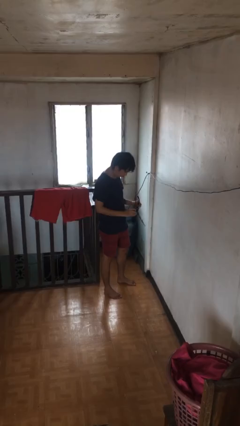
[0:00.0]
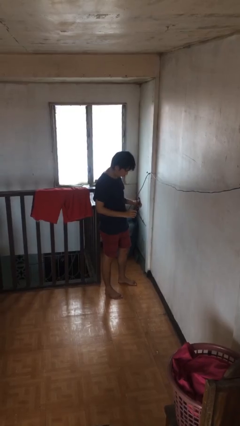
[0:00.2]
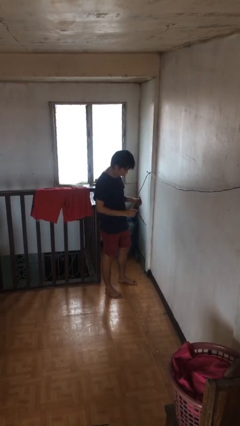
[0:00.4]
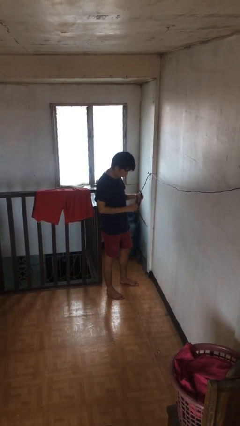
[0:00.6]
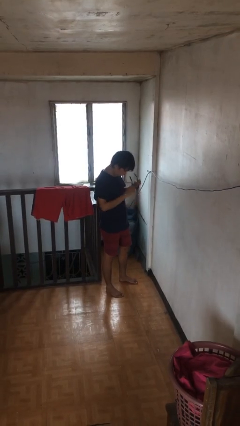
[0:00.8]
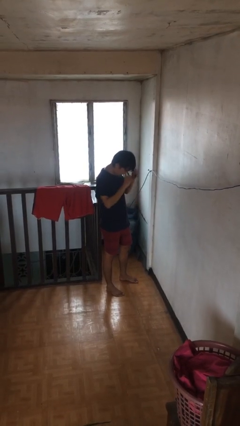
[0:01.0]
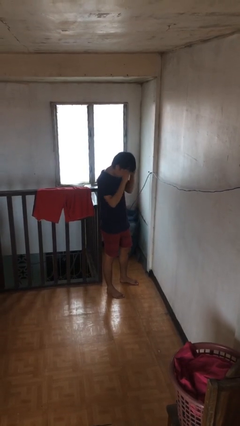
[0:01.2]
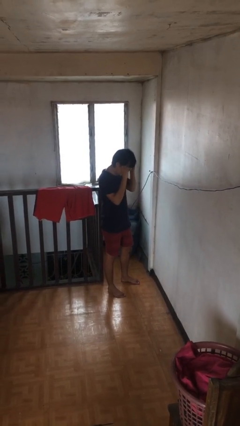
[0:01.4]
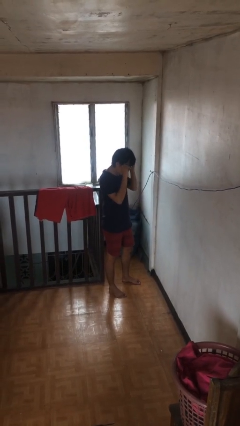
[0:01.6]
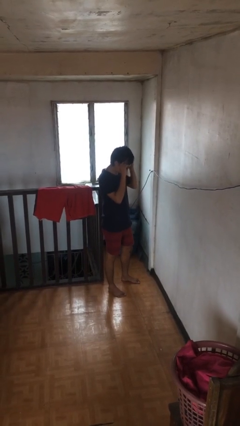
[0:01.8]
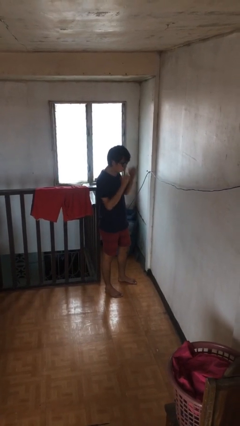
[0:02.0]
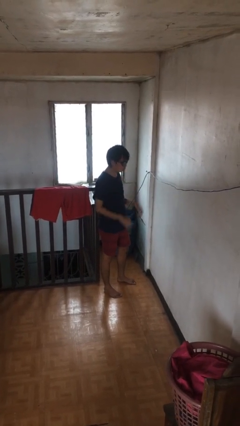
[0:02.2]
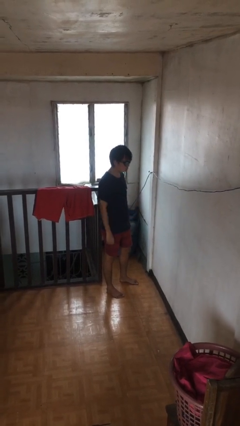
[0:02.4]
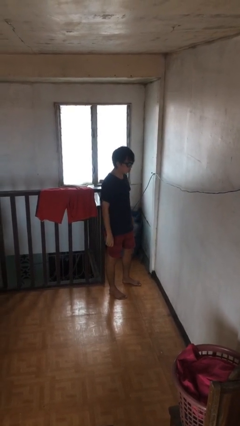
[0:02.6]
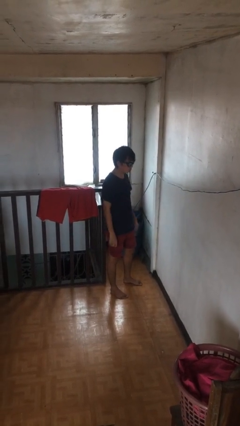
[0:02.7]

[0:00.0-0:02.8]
person puts on sunglasses

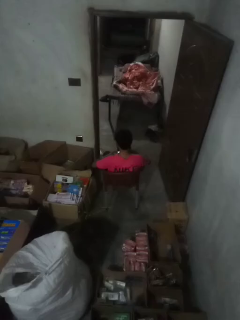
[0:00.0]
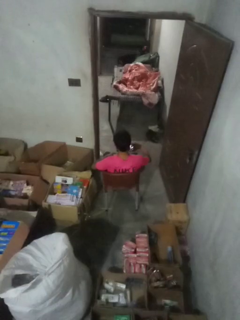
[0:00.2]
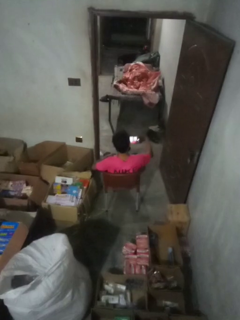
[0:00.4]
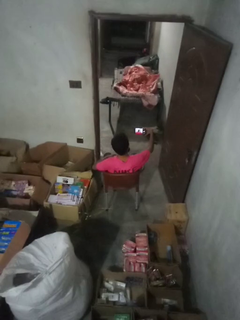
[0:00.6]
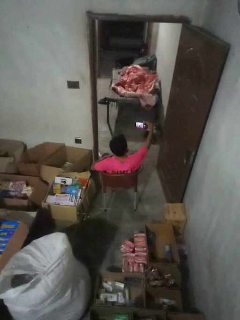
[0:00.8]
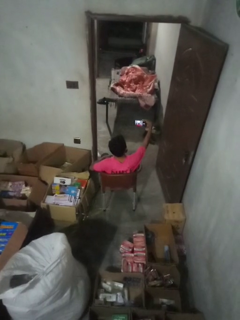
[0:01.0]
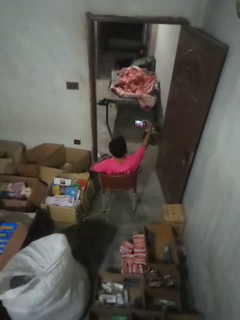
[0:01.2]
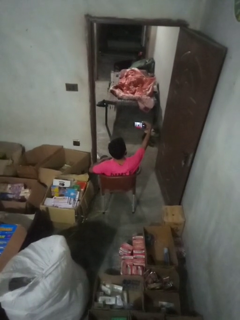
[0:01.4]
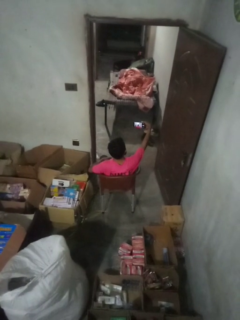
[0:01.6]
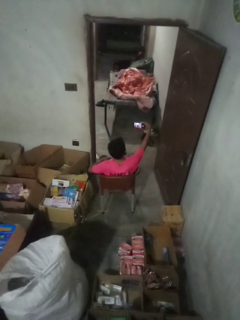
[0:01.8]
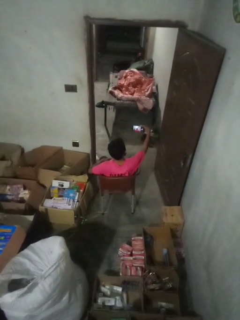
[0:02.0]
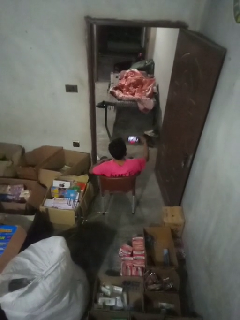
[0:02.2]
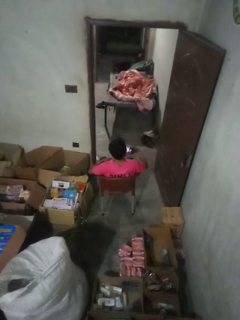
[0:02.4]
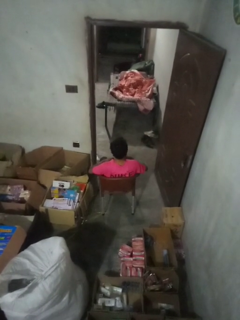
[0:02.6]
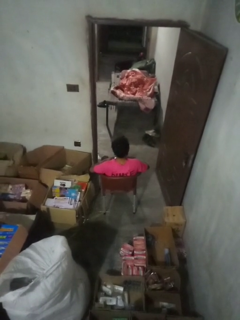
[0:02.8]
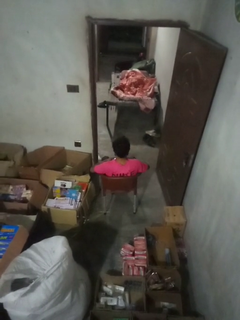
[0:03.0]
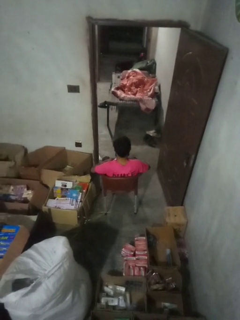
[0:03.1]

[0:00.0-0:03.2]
person takes selfie

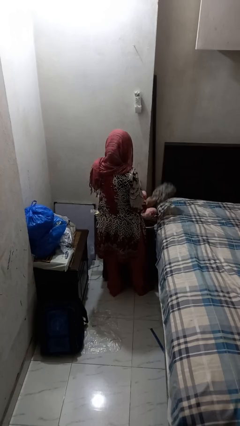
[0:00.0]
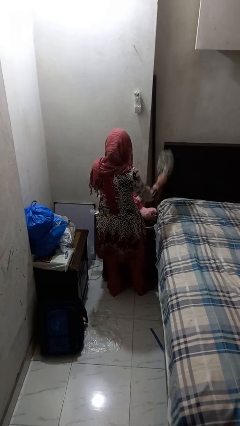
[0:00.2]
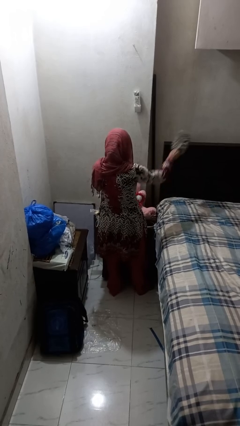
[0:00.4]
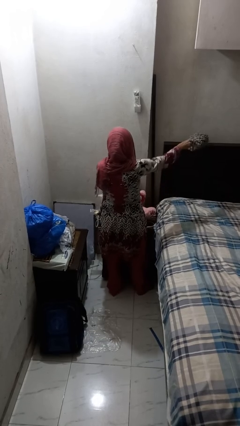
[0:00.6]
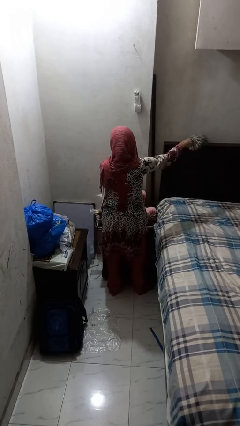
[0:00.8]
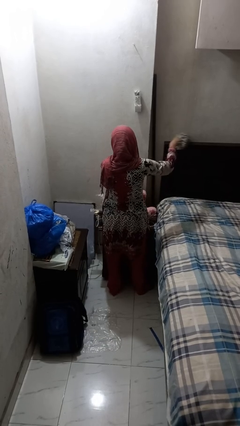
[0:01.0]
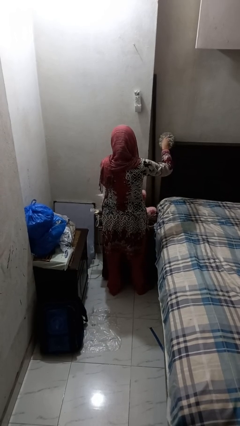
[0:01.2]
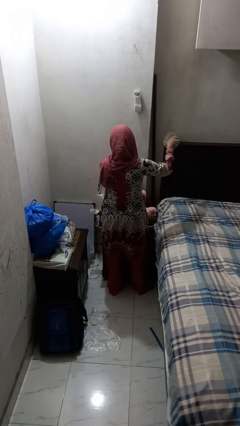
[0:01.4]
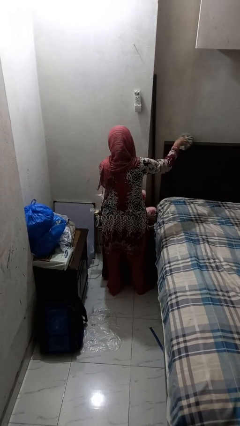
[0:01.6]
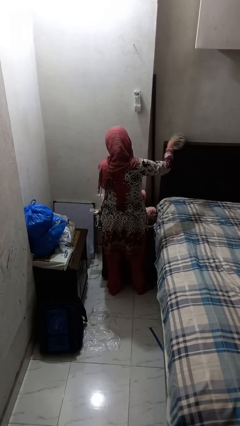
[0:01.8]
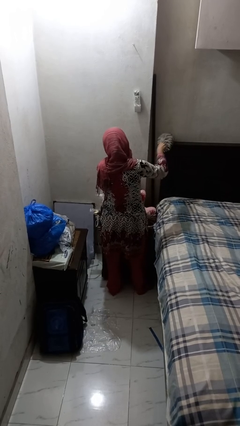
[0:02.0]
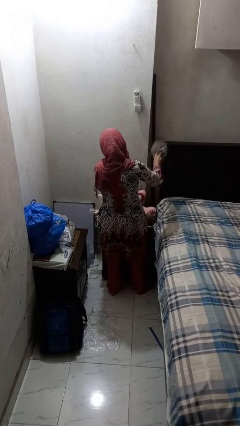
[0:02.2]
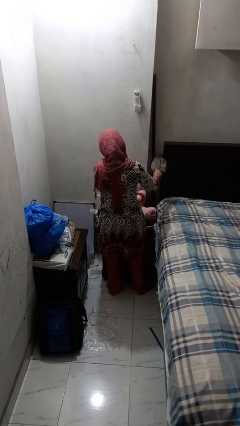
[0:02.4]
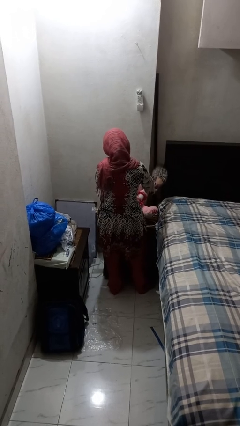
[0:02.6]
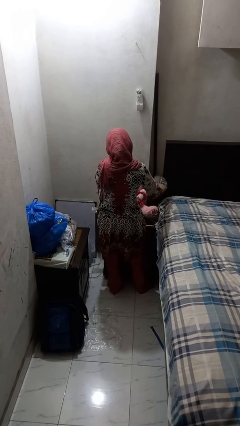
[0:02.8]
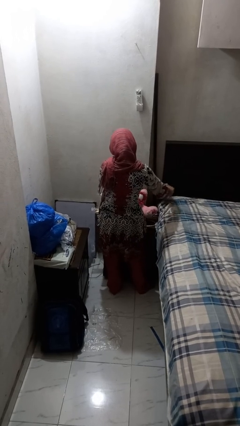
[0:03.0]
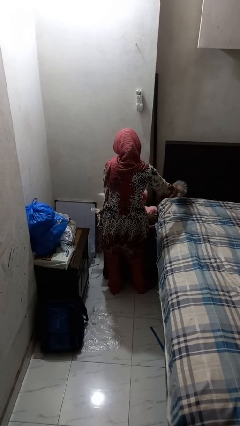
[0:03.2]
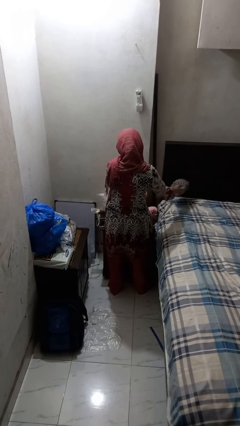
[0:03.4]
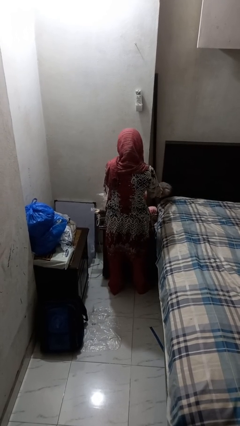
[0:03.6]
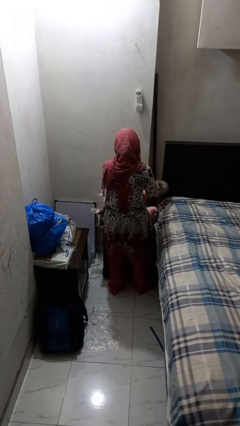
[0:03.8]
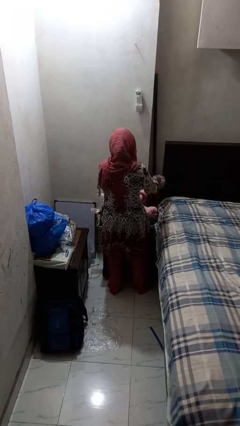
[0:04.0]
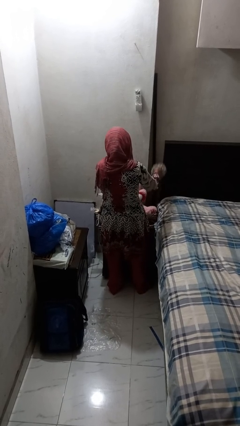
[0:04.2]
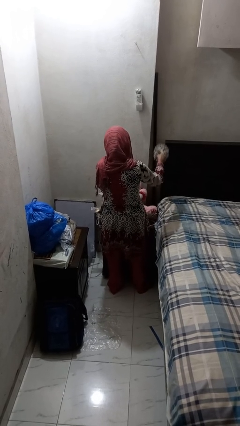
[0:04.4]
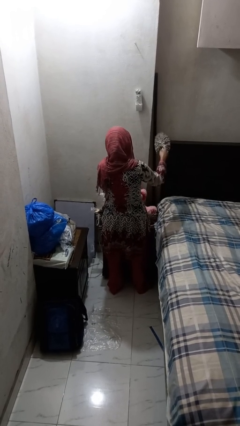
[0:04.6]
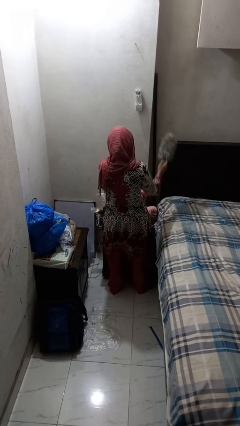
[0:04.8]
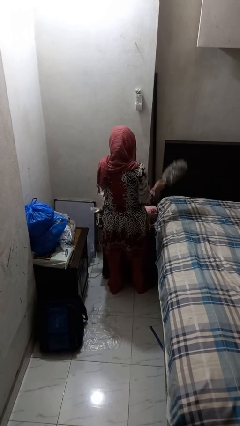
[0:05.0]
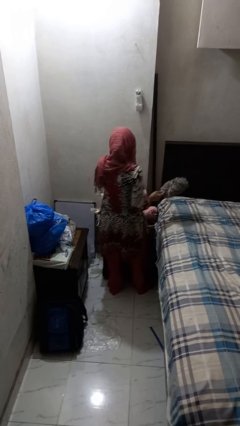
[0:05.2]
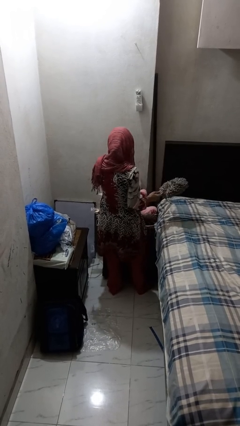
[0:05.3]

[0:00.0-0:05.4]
person dusts furniture

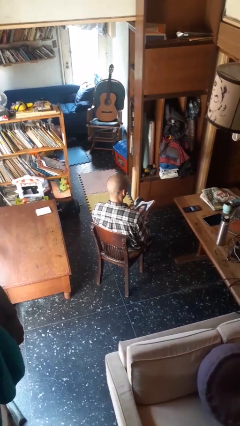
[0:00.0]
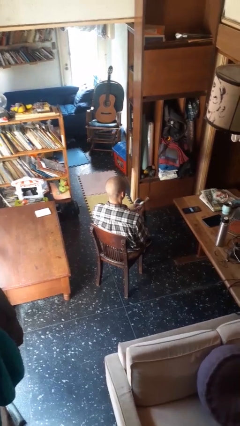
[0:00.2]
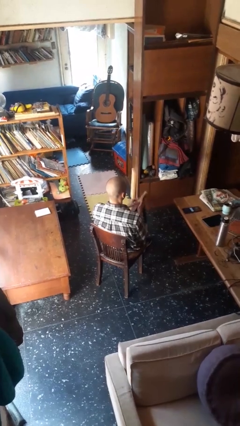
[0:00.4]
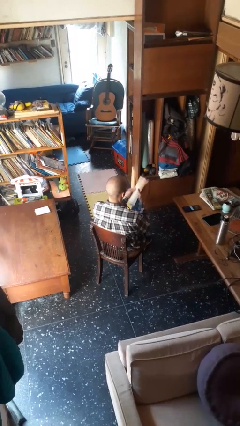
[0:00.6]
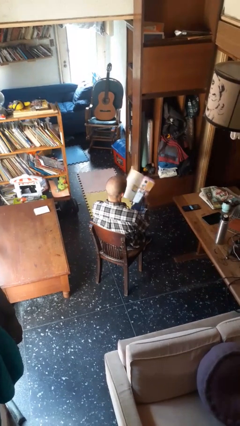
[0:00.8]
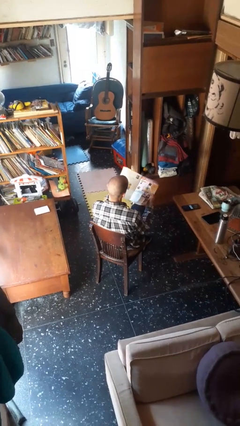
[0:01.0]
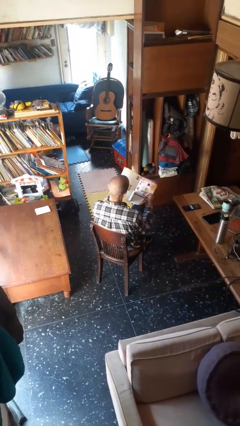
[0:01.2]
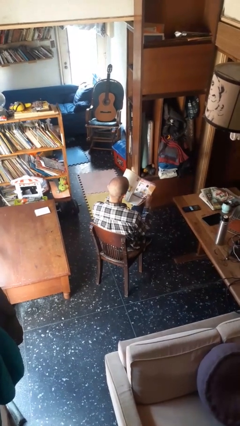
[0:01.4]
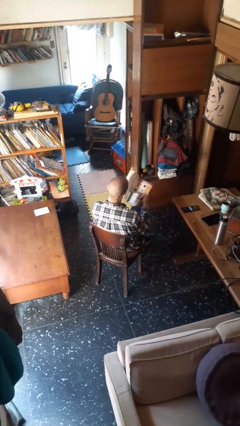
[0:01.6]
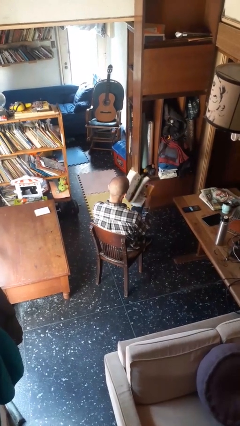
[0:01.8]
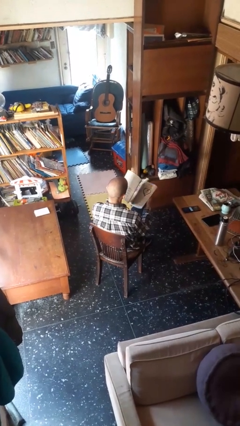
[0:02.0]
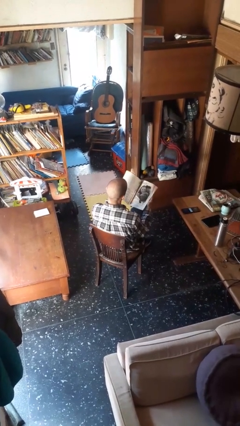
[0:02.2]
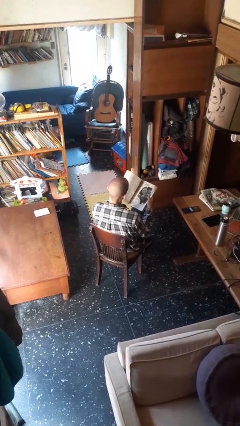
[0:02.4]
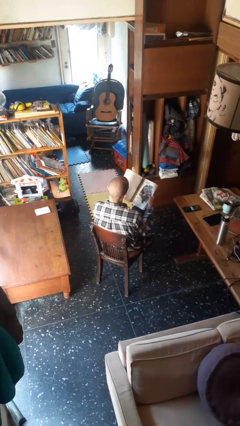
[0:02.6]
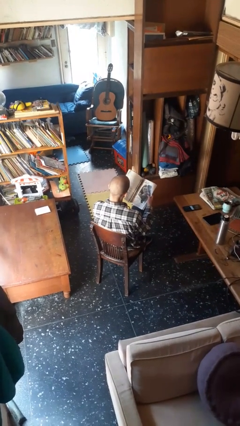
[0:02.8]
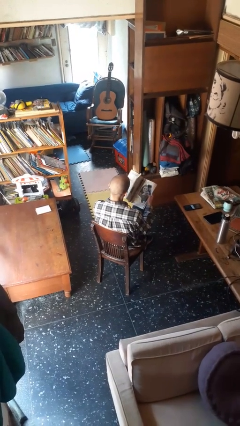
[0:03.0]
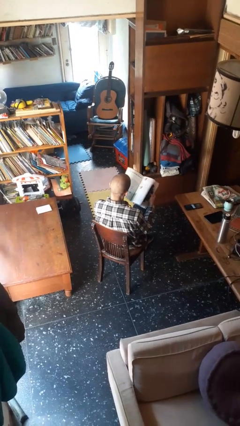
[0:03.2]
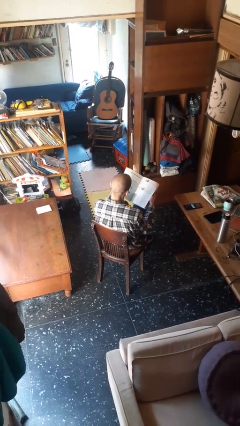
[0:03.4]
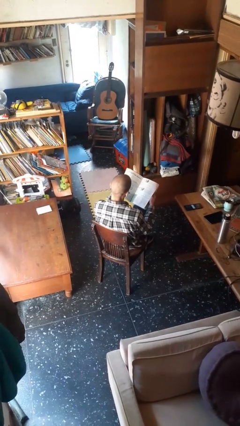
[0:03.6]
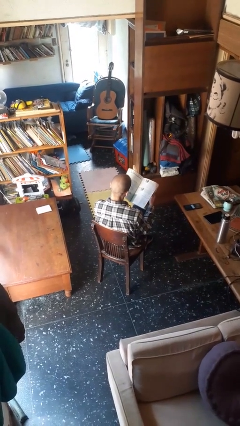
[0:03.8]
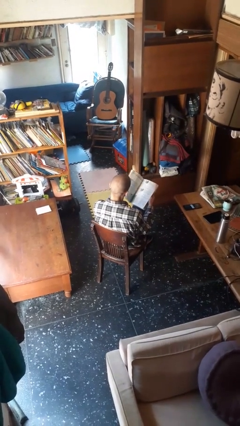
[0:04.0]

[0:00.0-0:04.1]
person reads magazine

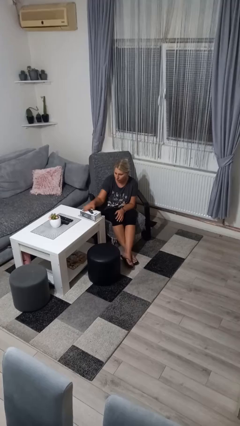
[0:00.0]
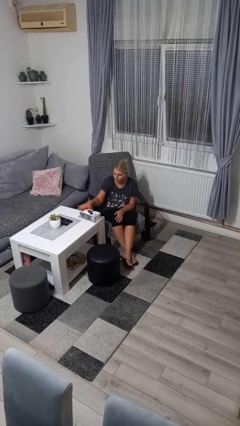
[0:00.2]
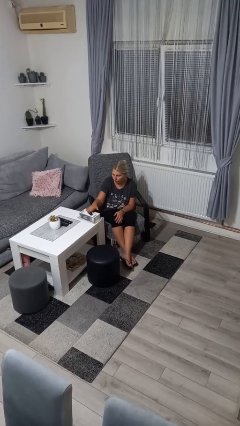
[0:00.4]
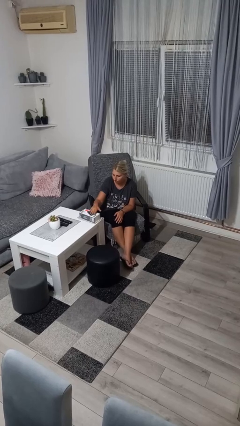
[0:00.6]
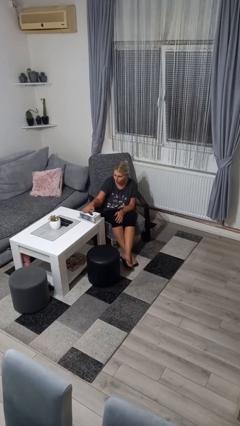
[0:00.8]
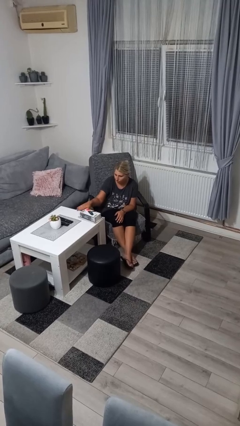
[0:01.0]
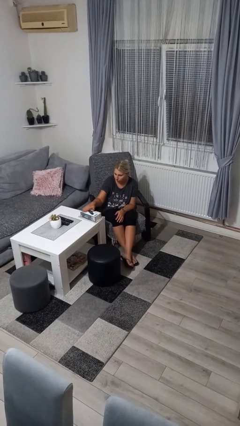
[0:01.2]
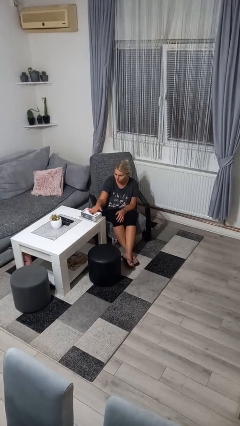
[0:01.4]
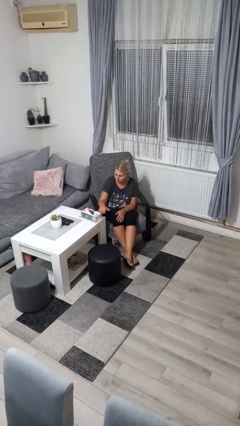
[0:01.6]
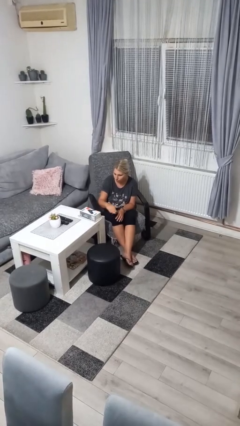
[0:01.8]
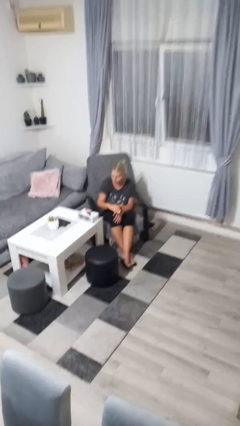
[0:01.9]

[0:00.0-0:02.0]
person waves hand over object

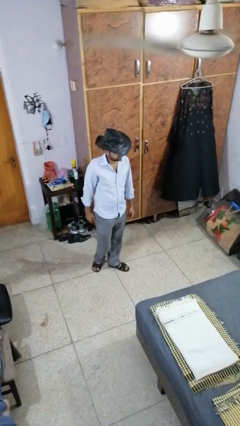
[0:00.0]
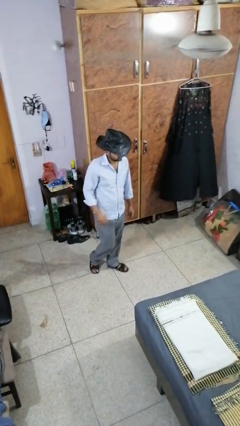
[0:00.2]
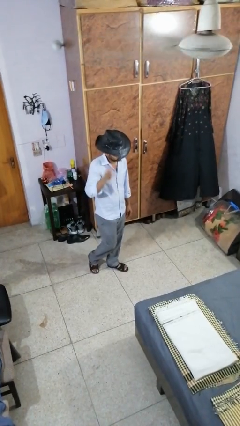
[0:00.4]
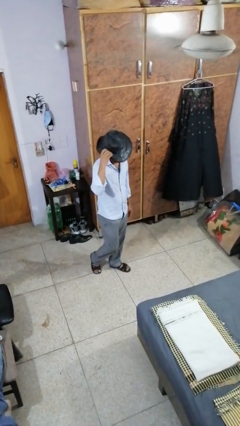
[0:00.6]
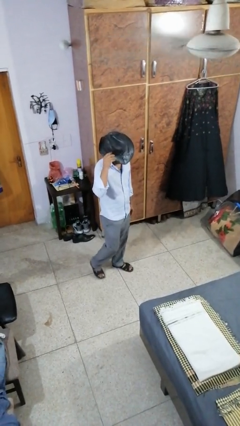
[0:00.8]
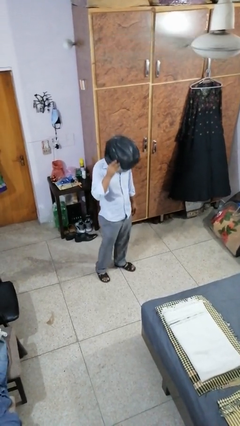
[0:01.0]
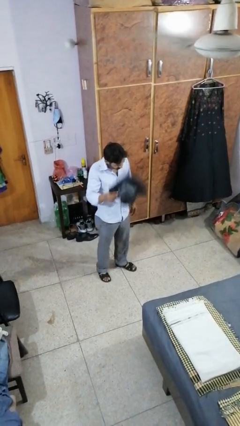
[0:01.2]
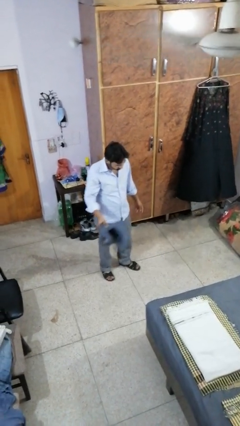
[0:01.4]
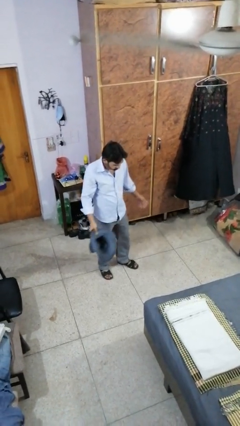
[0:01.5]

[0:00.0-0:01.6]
person takes off hat
